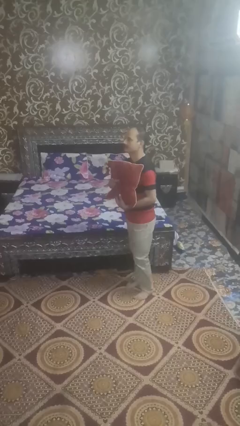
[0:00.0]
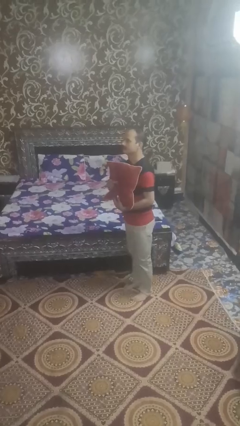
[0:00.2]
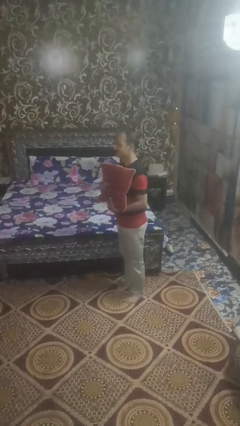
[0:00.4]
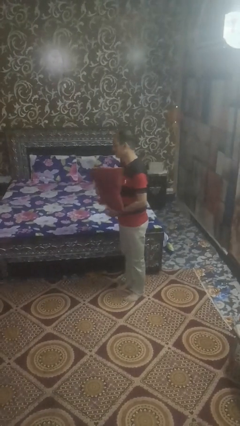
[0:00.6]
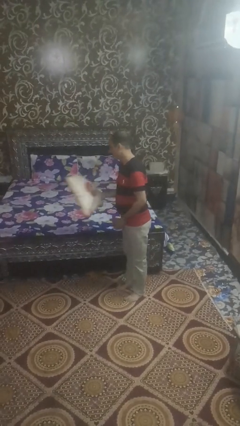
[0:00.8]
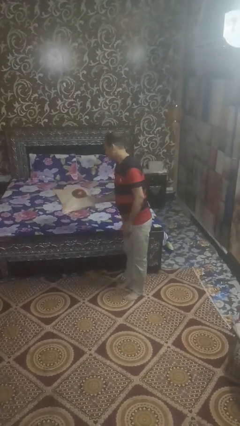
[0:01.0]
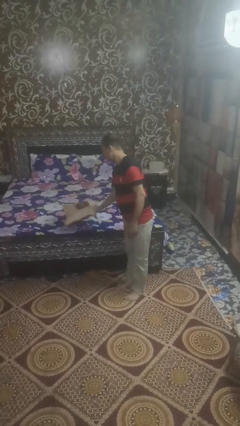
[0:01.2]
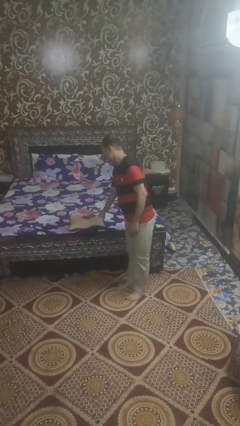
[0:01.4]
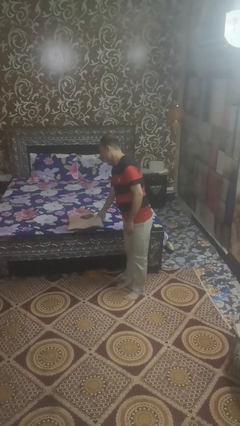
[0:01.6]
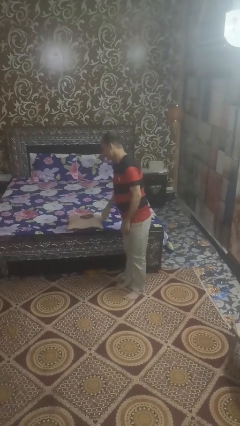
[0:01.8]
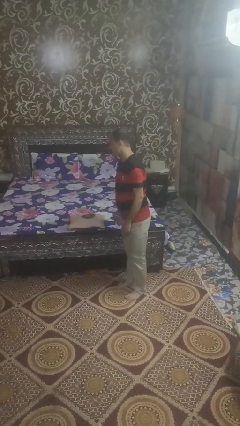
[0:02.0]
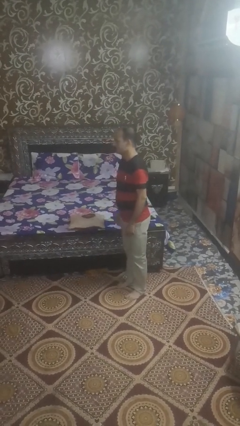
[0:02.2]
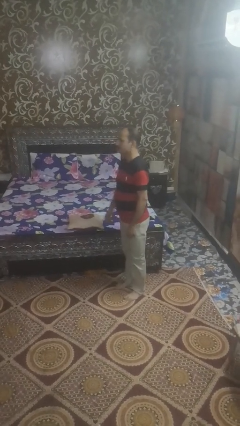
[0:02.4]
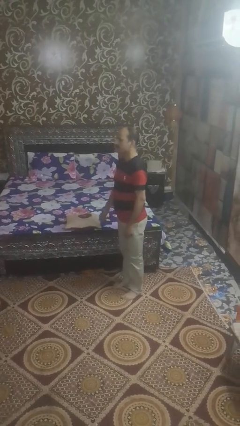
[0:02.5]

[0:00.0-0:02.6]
person puts down object on bed

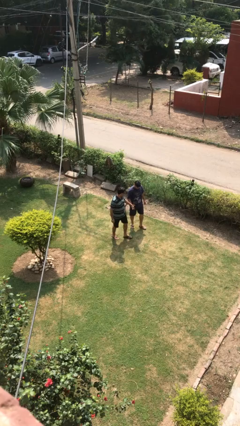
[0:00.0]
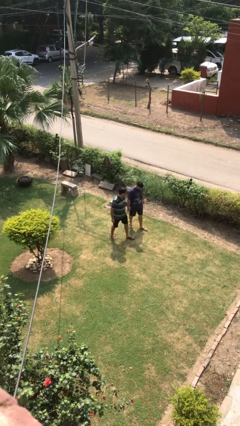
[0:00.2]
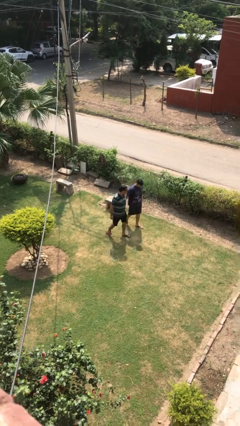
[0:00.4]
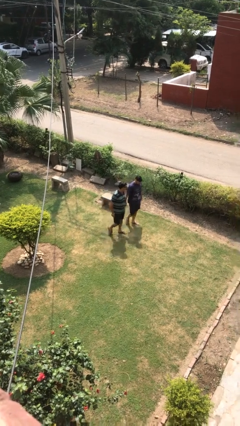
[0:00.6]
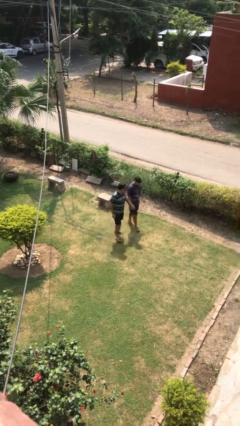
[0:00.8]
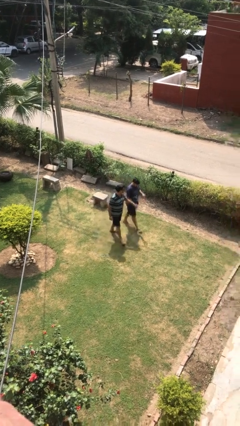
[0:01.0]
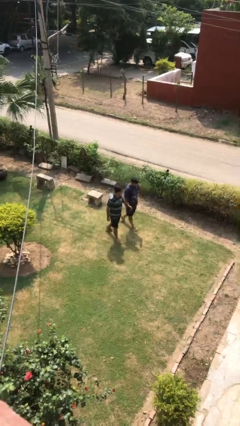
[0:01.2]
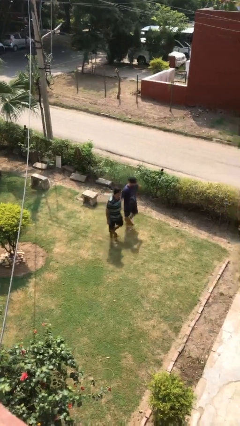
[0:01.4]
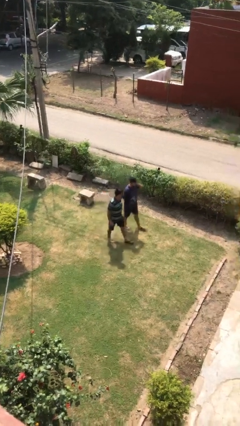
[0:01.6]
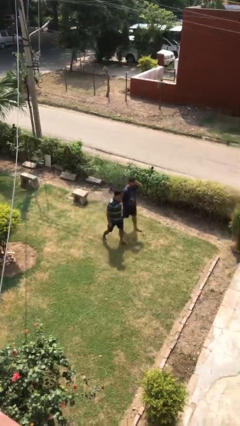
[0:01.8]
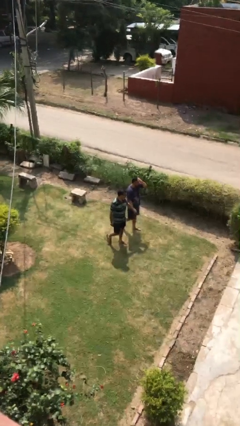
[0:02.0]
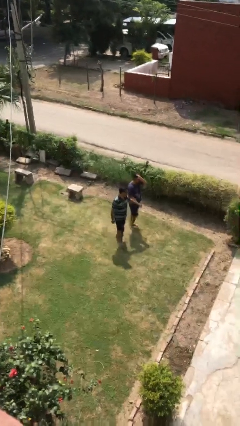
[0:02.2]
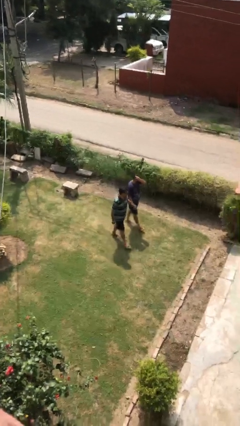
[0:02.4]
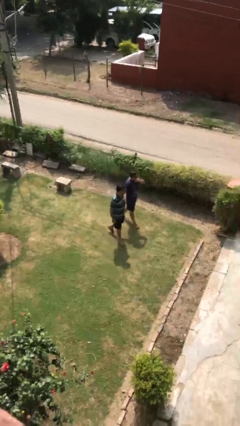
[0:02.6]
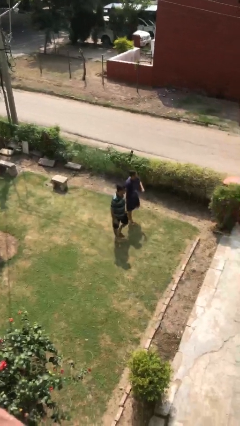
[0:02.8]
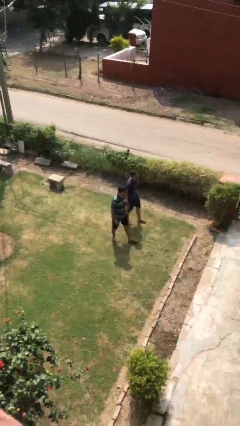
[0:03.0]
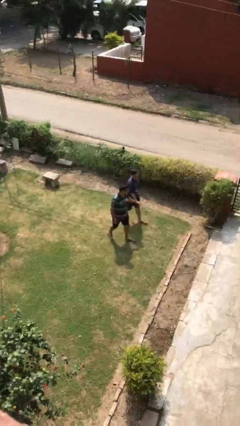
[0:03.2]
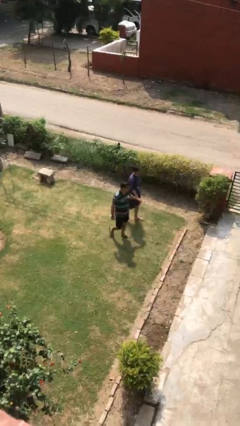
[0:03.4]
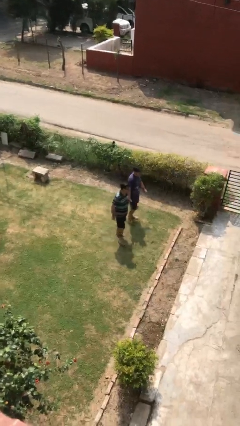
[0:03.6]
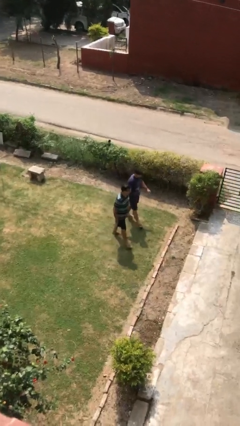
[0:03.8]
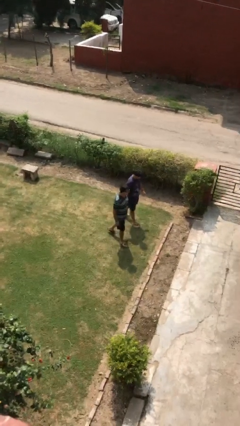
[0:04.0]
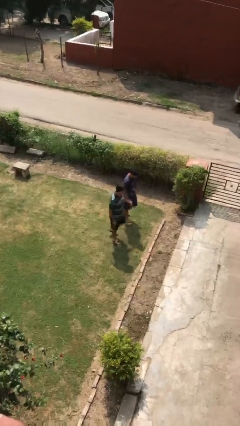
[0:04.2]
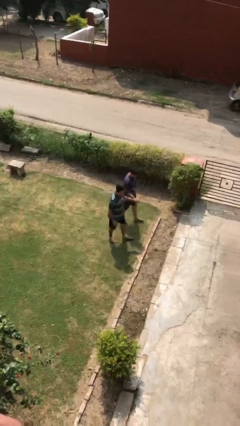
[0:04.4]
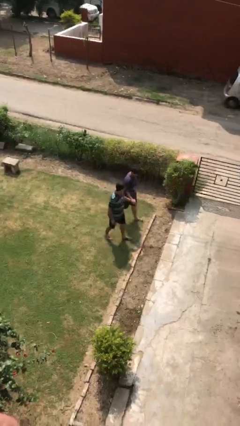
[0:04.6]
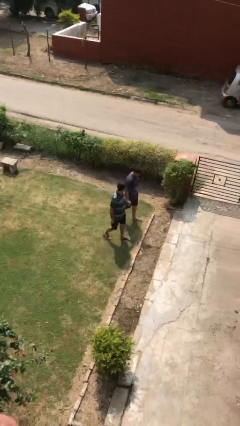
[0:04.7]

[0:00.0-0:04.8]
person holds hand

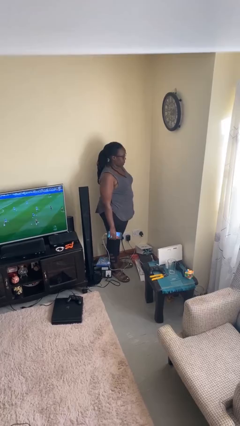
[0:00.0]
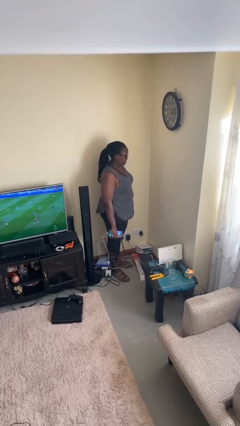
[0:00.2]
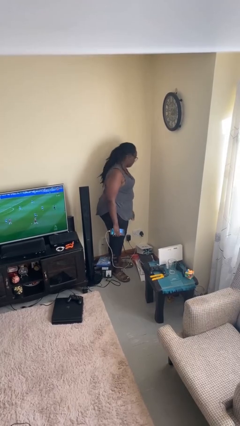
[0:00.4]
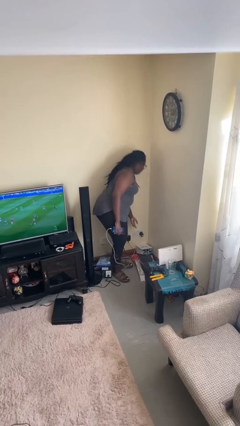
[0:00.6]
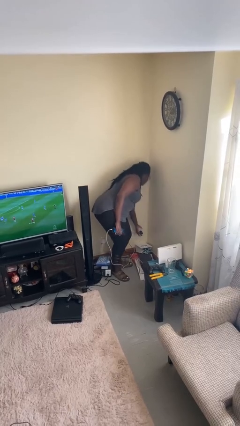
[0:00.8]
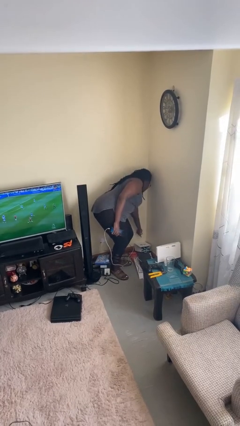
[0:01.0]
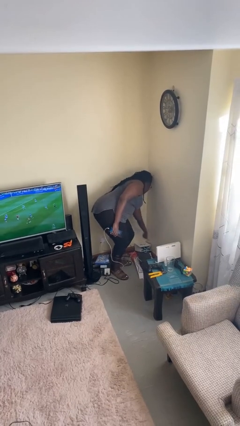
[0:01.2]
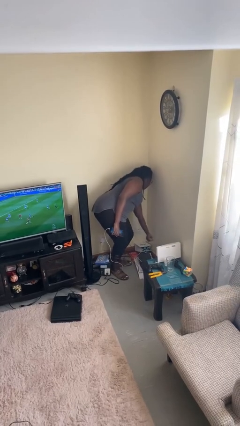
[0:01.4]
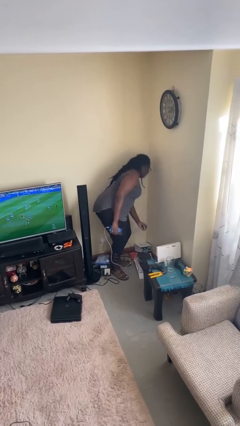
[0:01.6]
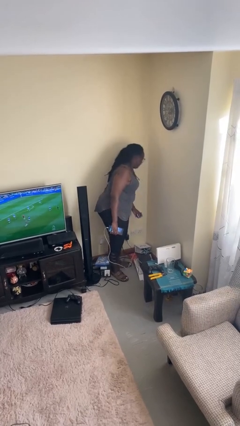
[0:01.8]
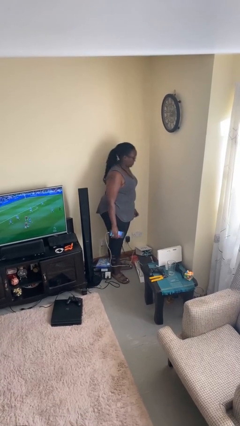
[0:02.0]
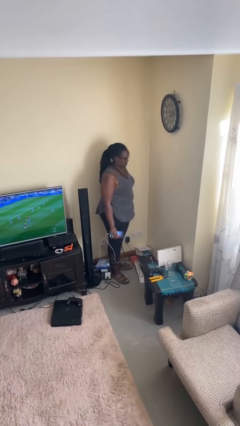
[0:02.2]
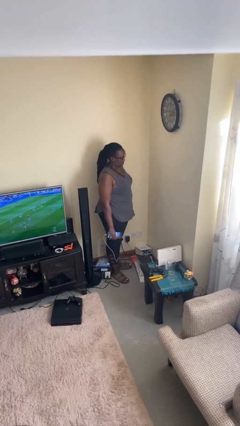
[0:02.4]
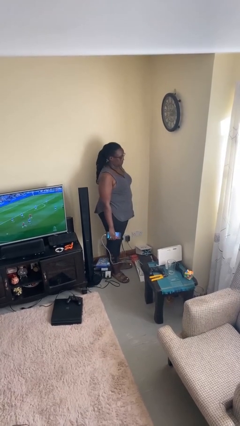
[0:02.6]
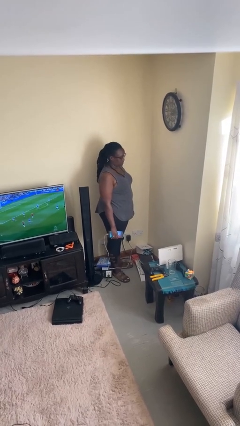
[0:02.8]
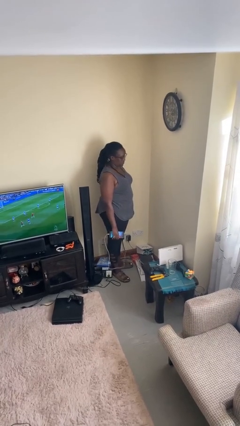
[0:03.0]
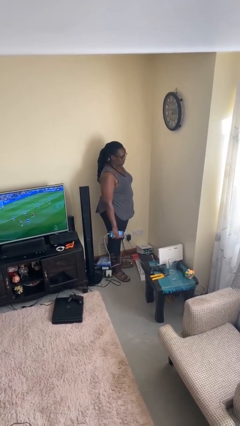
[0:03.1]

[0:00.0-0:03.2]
person unplugs from electrical socket

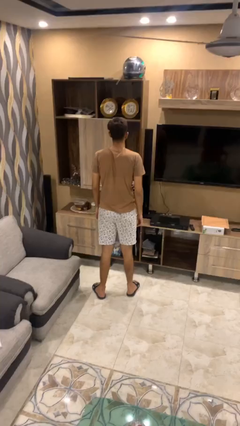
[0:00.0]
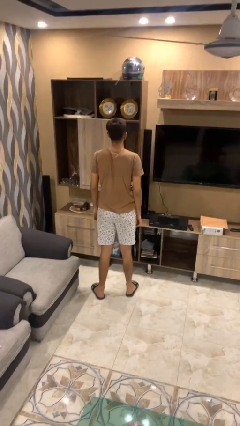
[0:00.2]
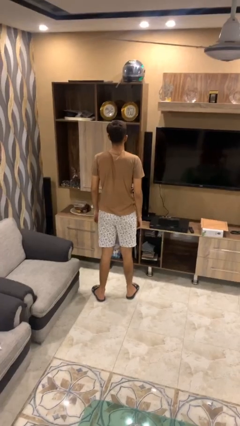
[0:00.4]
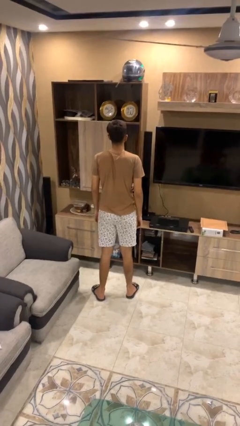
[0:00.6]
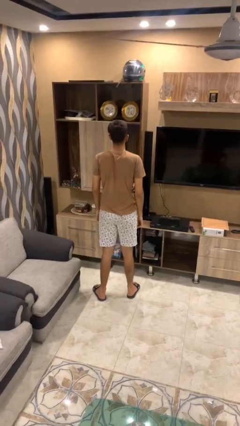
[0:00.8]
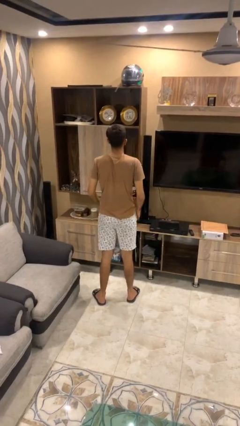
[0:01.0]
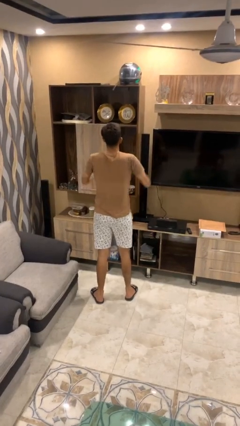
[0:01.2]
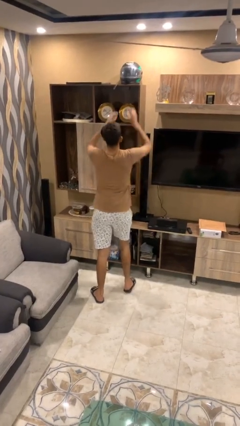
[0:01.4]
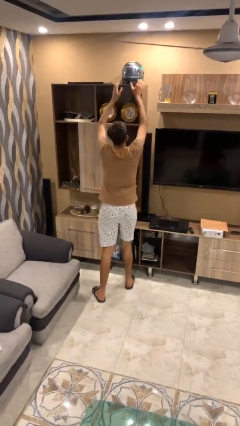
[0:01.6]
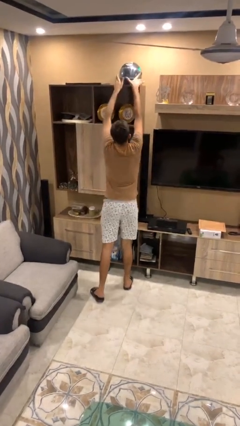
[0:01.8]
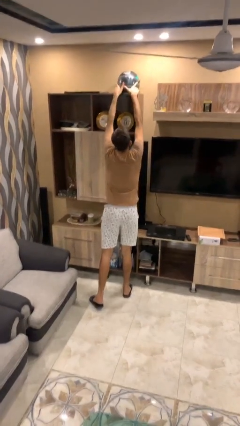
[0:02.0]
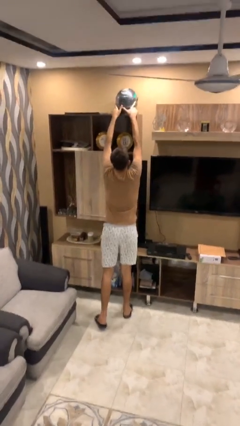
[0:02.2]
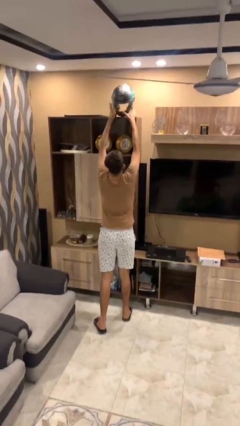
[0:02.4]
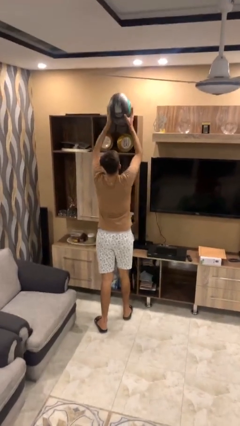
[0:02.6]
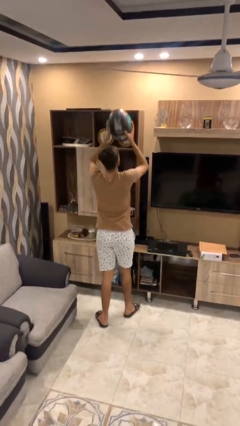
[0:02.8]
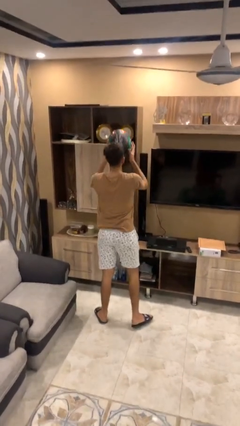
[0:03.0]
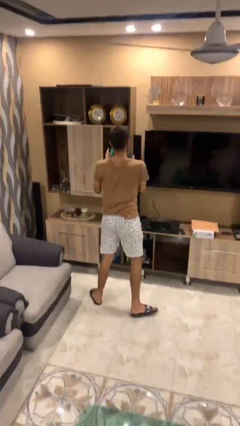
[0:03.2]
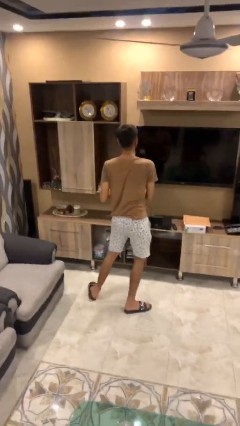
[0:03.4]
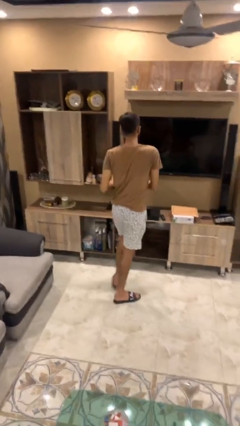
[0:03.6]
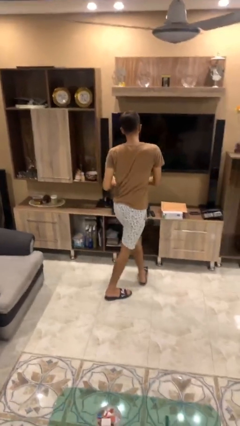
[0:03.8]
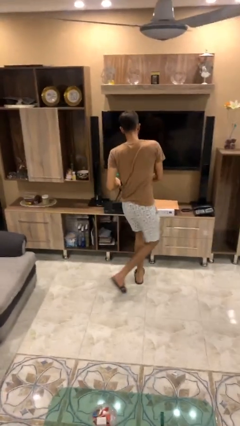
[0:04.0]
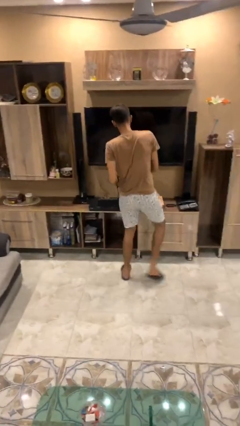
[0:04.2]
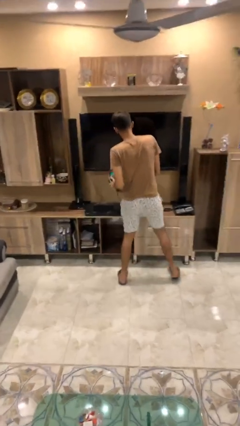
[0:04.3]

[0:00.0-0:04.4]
person picks up object from shelf

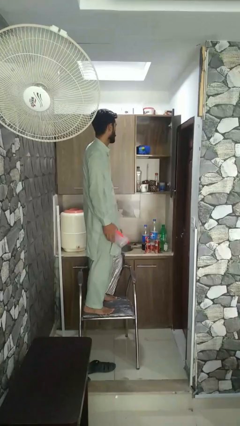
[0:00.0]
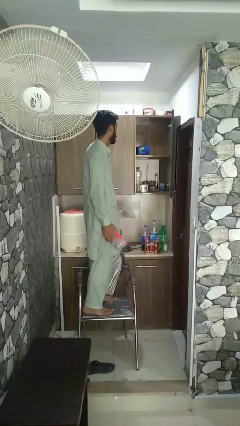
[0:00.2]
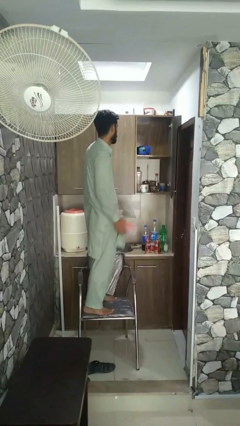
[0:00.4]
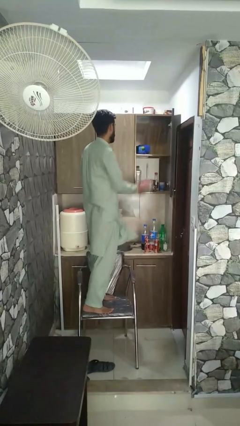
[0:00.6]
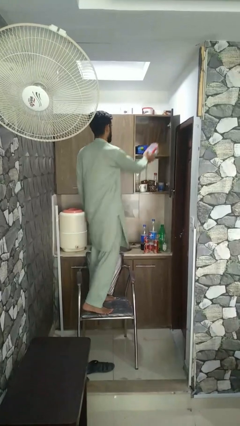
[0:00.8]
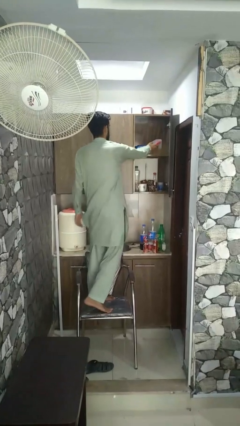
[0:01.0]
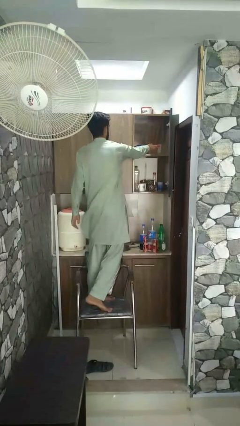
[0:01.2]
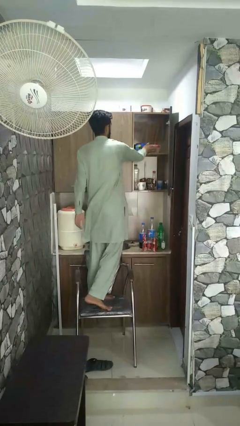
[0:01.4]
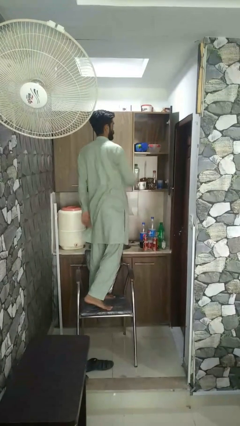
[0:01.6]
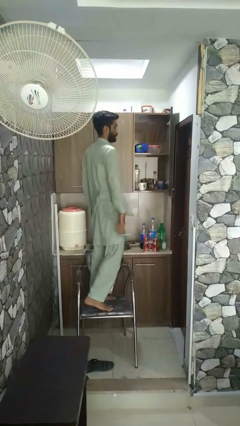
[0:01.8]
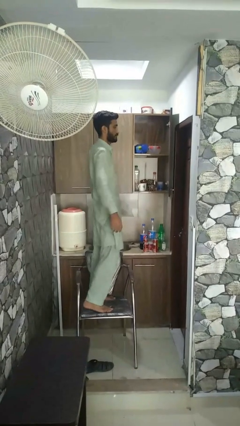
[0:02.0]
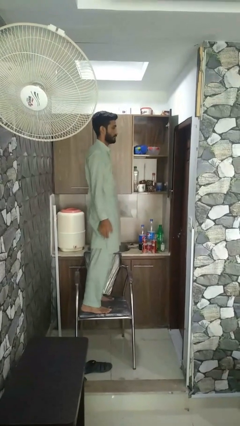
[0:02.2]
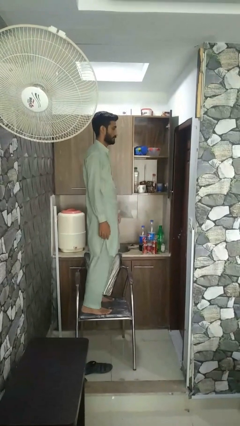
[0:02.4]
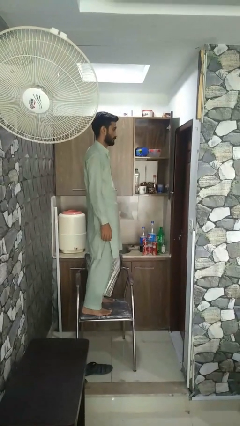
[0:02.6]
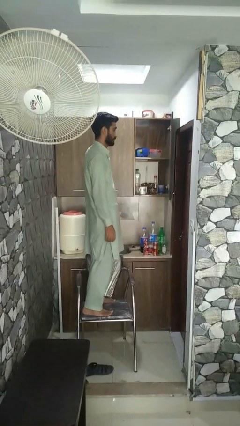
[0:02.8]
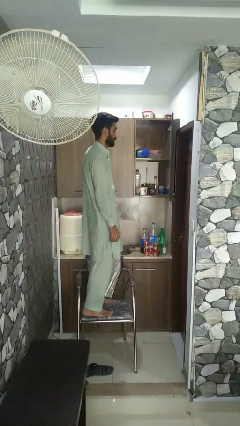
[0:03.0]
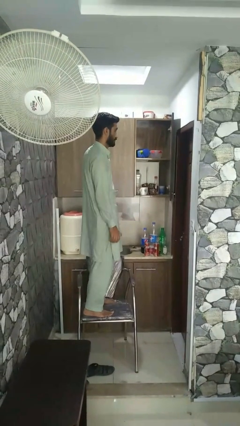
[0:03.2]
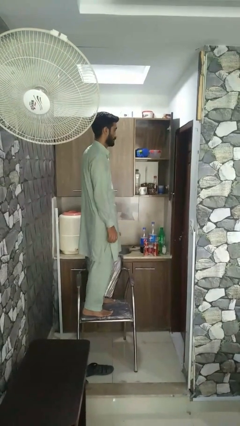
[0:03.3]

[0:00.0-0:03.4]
person puts down object on shelf
